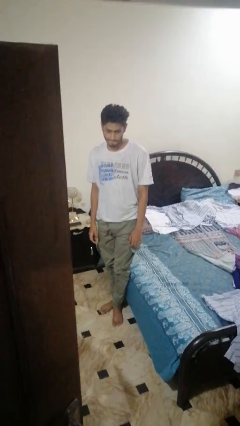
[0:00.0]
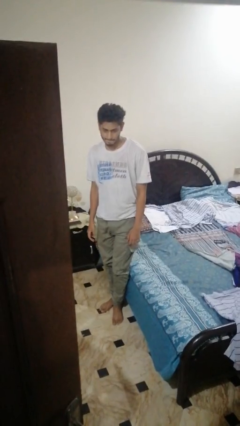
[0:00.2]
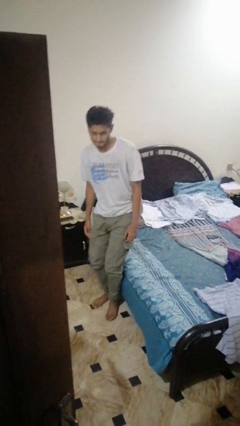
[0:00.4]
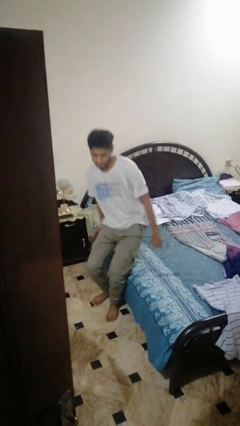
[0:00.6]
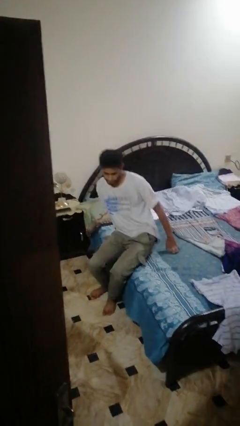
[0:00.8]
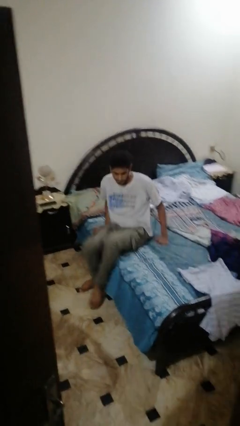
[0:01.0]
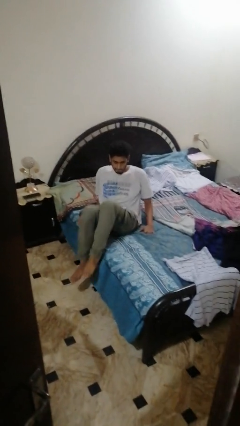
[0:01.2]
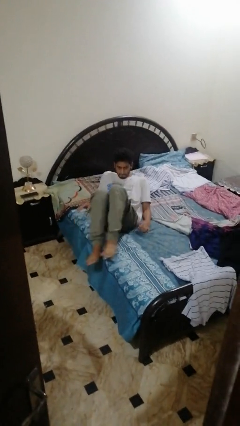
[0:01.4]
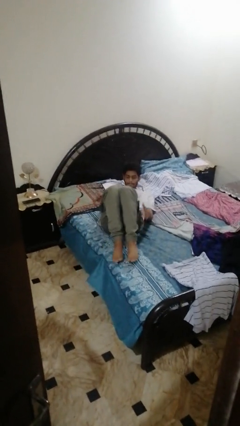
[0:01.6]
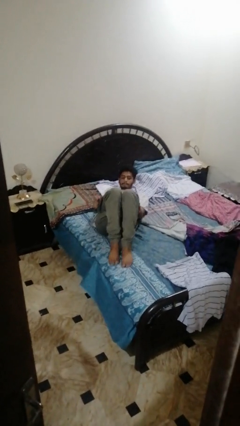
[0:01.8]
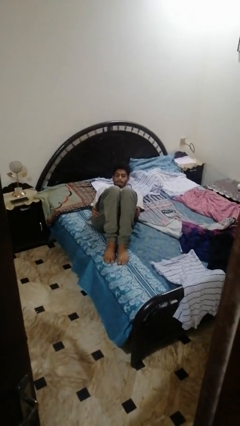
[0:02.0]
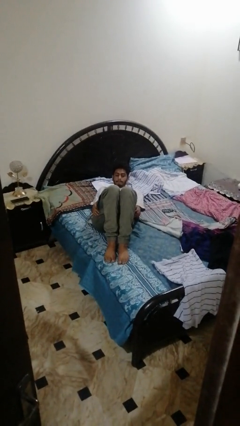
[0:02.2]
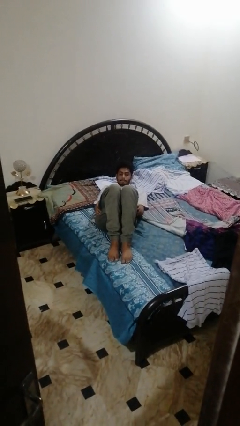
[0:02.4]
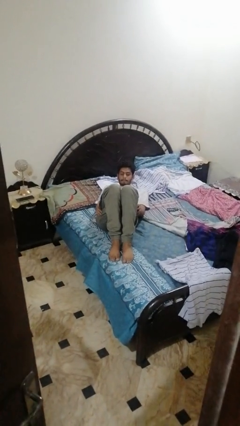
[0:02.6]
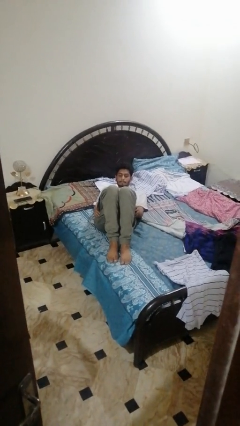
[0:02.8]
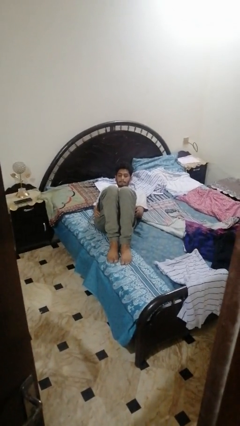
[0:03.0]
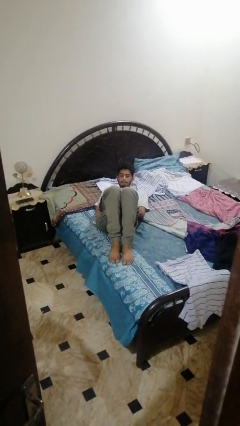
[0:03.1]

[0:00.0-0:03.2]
person lies down on bed

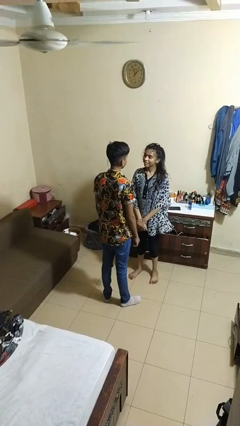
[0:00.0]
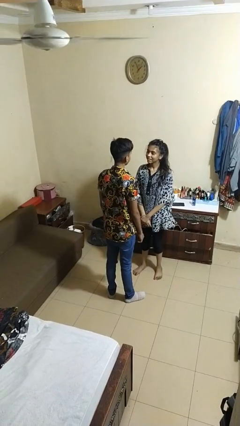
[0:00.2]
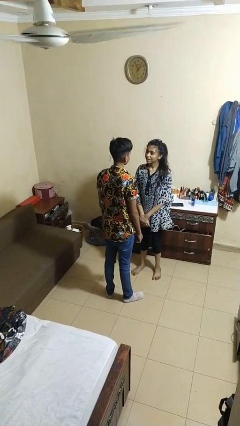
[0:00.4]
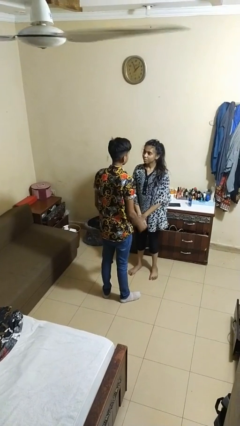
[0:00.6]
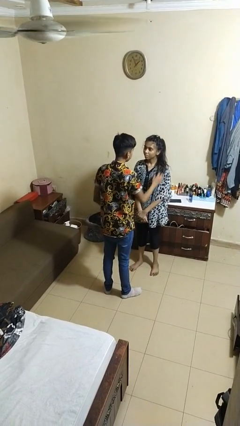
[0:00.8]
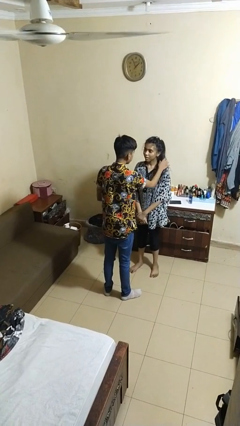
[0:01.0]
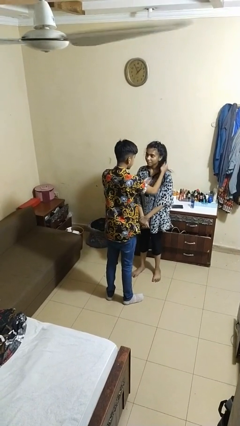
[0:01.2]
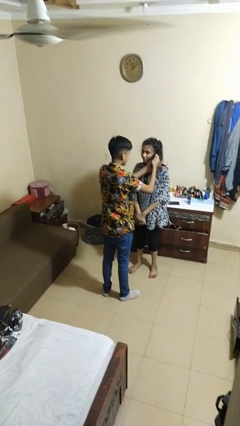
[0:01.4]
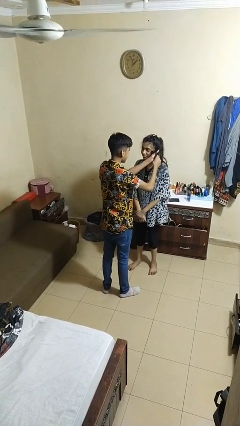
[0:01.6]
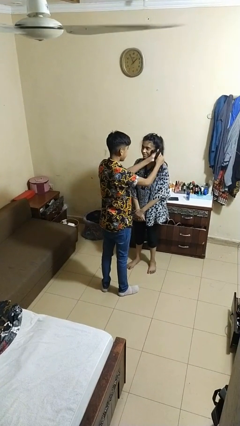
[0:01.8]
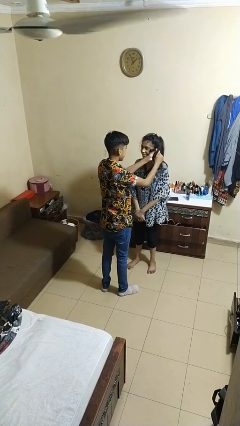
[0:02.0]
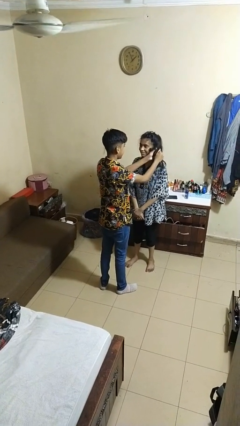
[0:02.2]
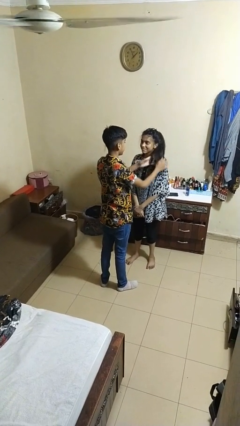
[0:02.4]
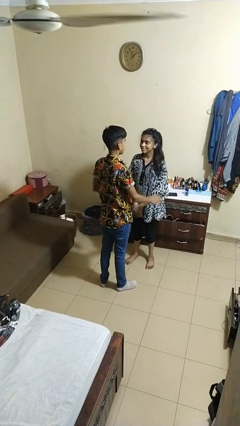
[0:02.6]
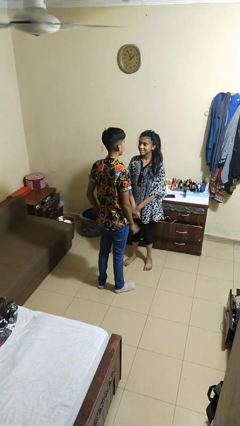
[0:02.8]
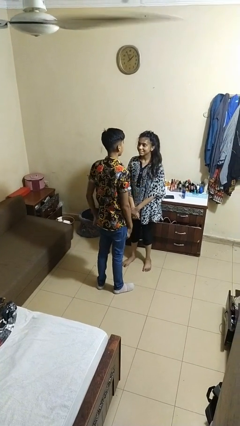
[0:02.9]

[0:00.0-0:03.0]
person grabs person by hair

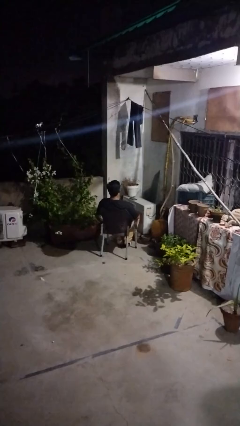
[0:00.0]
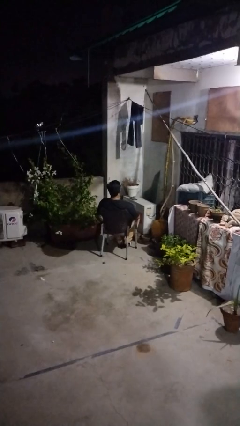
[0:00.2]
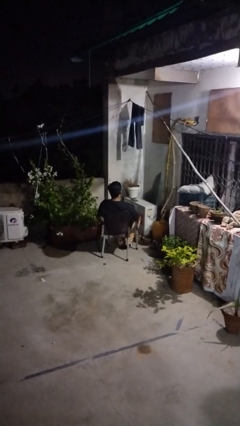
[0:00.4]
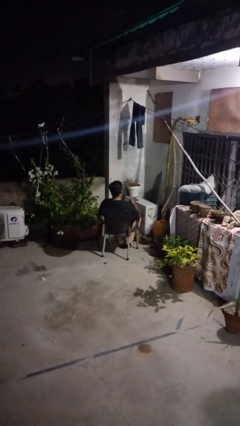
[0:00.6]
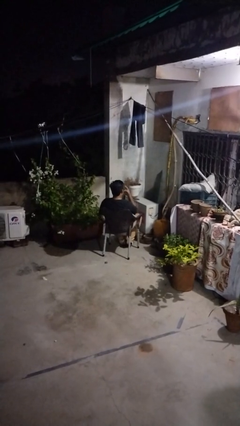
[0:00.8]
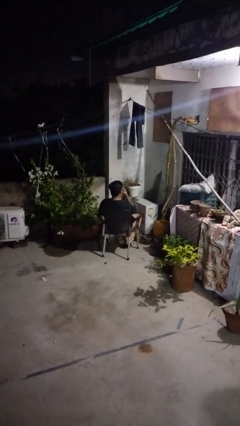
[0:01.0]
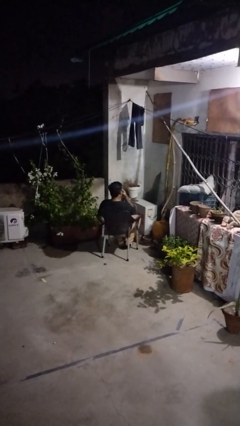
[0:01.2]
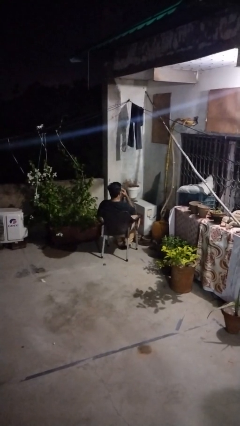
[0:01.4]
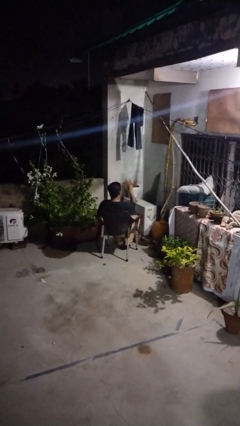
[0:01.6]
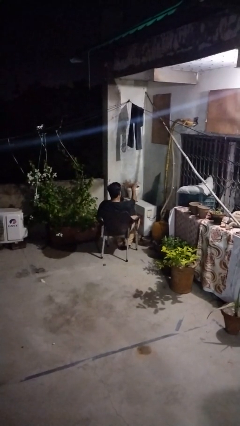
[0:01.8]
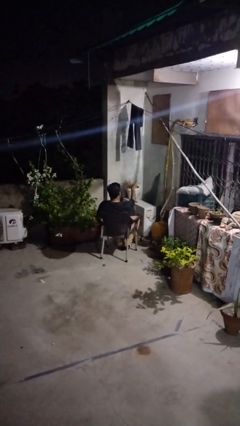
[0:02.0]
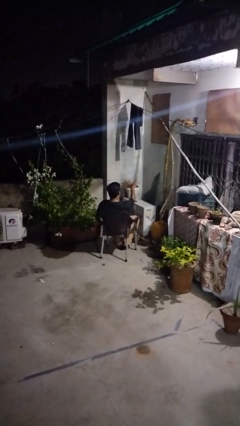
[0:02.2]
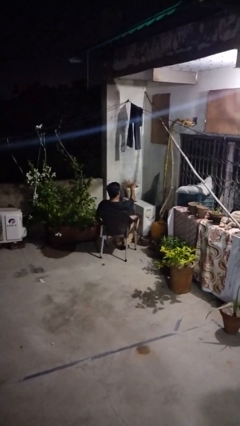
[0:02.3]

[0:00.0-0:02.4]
person gestures watch closely

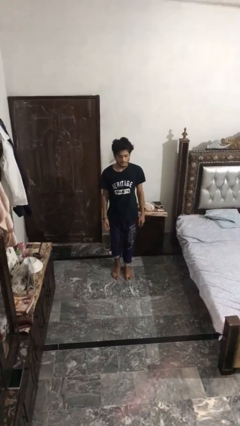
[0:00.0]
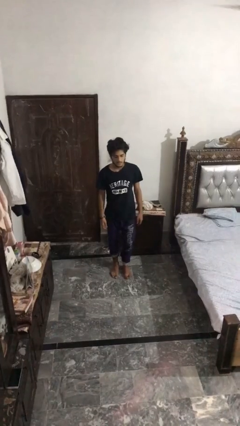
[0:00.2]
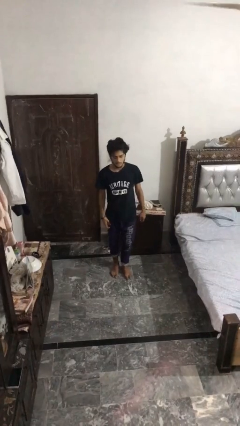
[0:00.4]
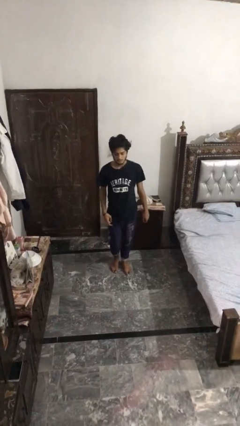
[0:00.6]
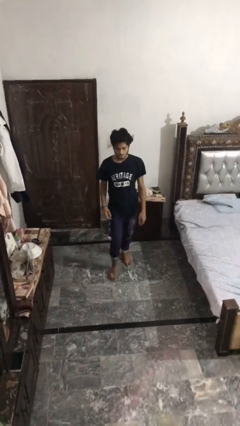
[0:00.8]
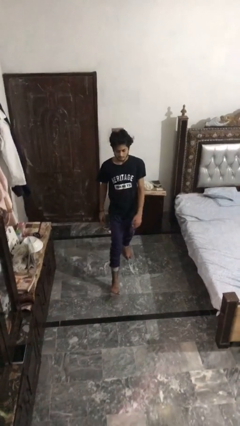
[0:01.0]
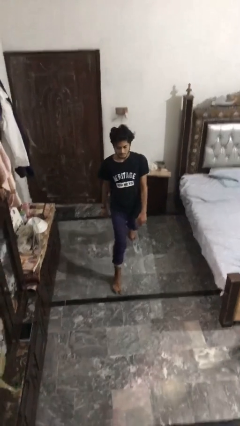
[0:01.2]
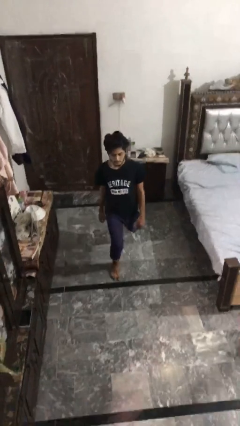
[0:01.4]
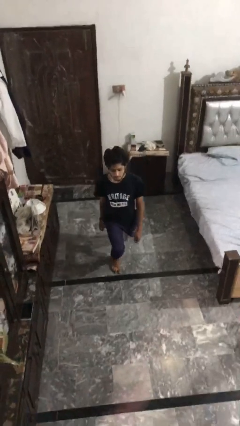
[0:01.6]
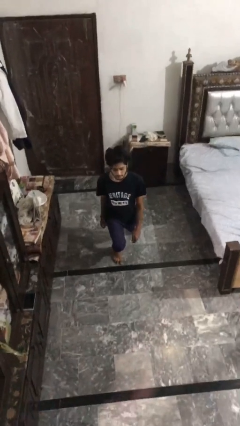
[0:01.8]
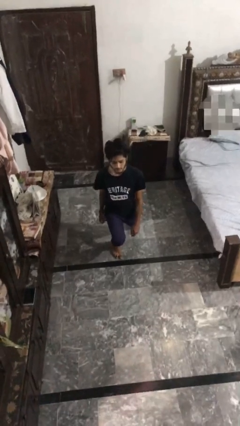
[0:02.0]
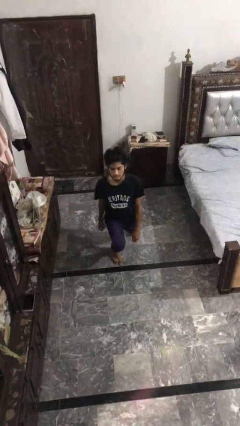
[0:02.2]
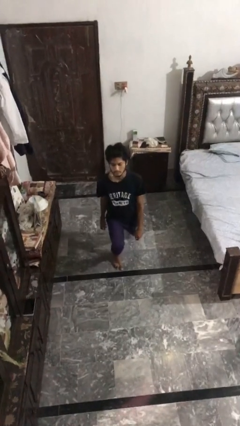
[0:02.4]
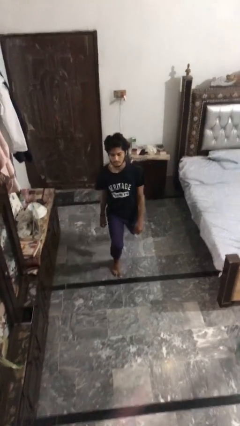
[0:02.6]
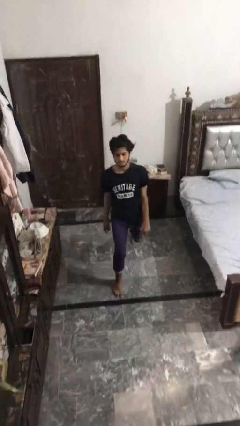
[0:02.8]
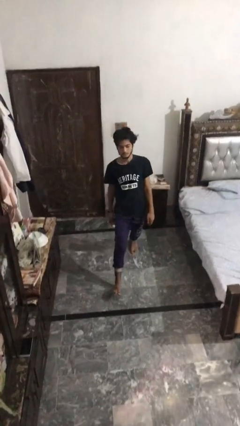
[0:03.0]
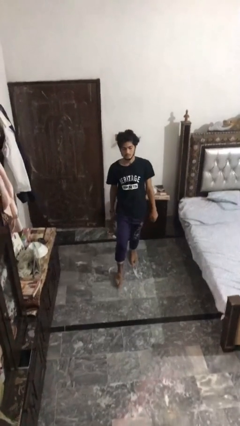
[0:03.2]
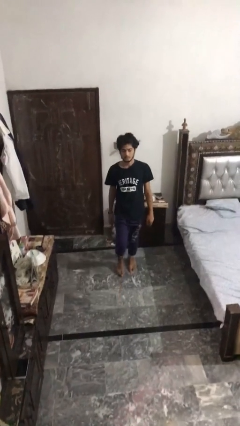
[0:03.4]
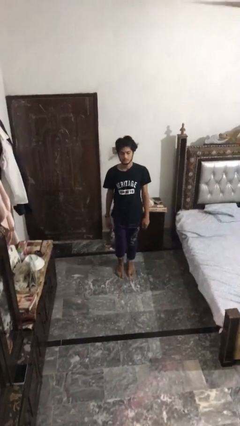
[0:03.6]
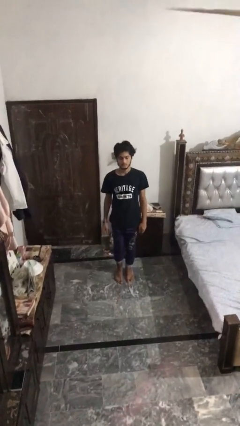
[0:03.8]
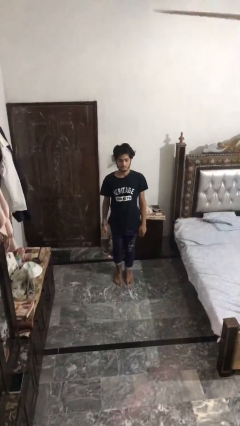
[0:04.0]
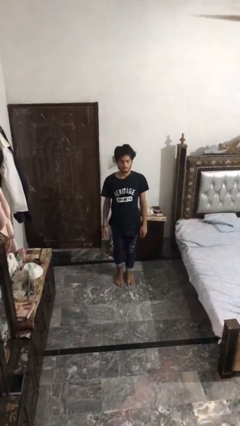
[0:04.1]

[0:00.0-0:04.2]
person exercises with lunges

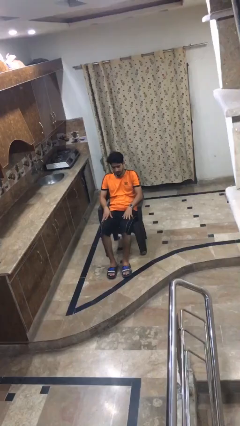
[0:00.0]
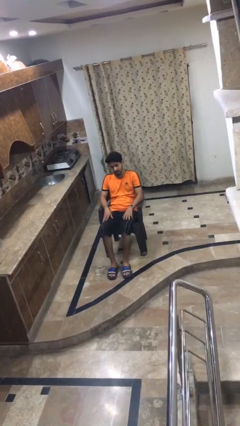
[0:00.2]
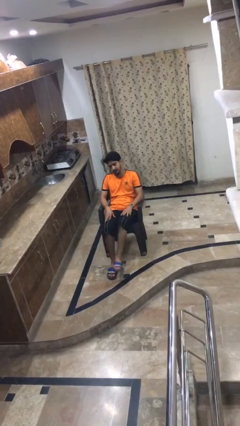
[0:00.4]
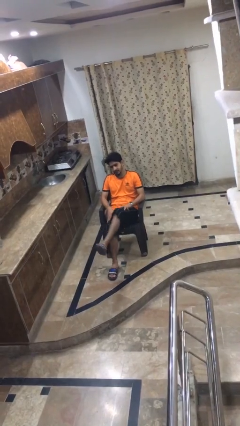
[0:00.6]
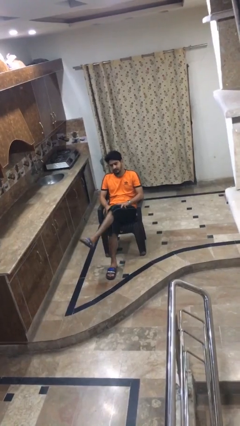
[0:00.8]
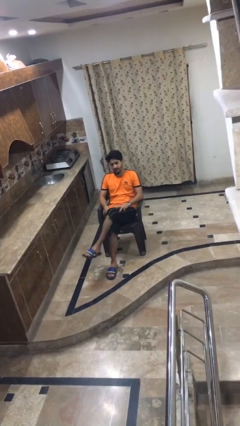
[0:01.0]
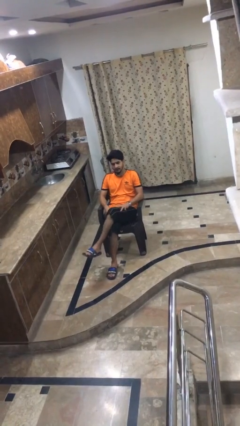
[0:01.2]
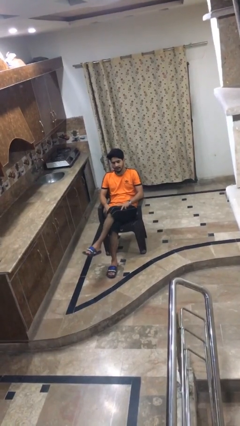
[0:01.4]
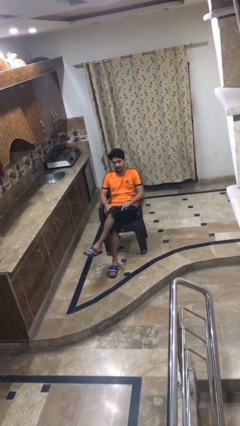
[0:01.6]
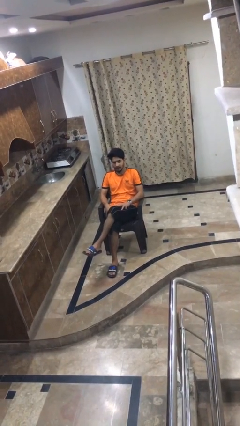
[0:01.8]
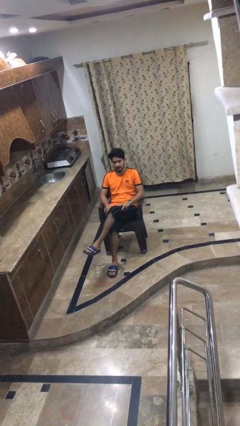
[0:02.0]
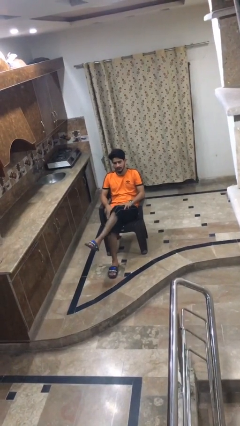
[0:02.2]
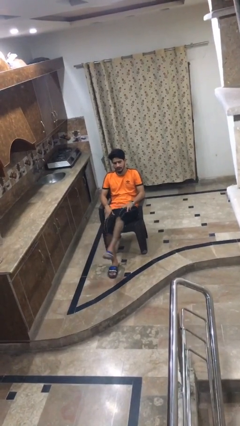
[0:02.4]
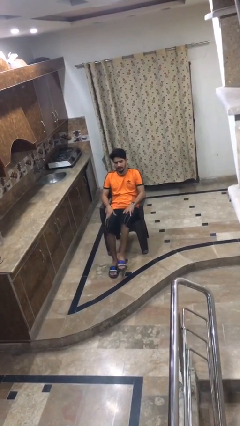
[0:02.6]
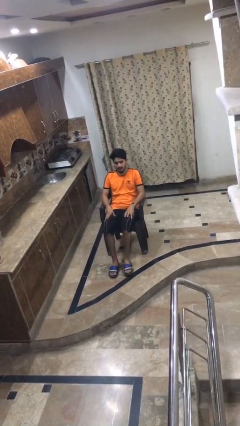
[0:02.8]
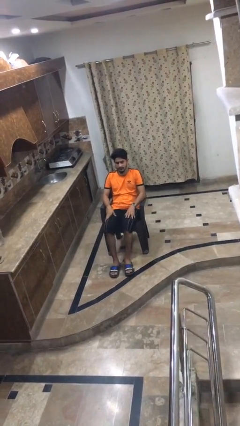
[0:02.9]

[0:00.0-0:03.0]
person crosses legs

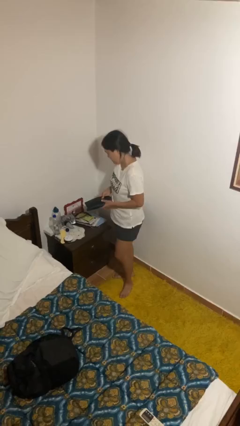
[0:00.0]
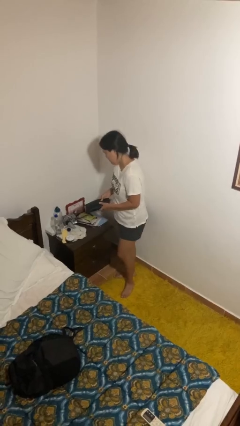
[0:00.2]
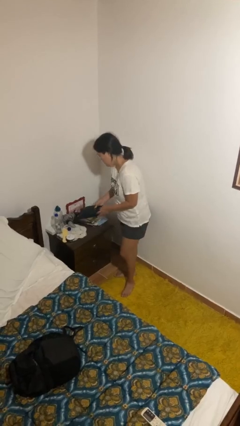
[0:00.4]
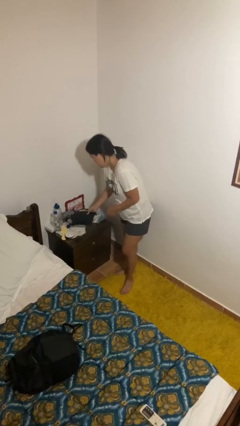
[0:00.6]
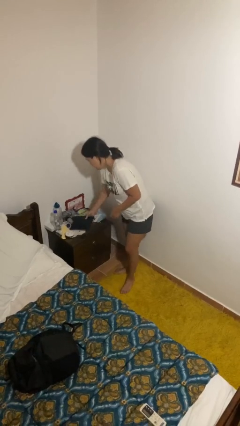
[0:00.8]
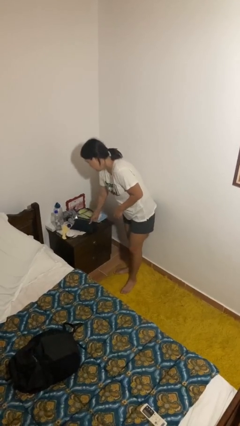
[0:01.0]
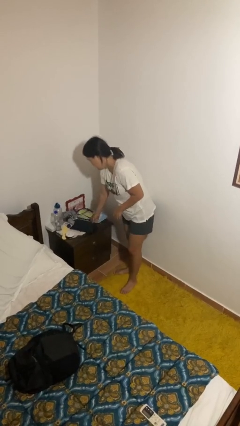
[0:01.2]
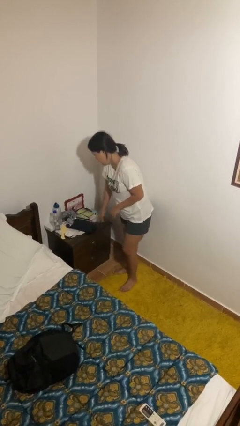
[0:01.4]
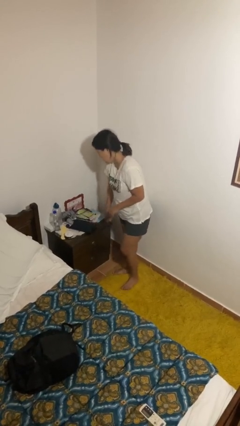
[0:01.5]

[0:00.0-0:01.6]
person puts down object on countertop
